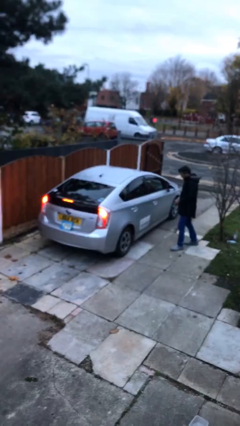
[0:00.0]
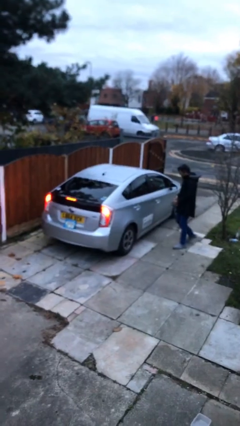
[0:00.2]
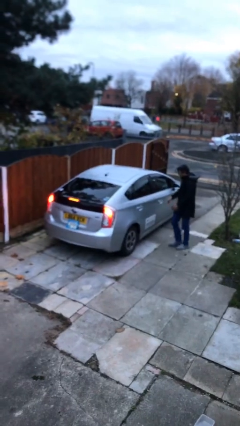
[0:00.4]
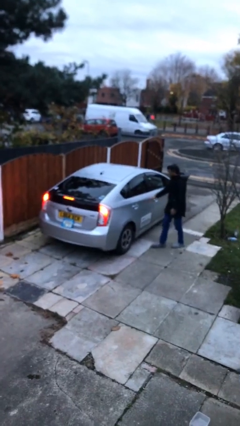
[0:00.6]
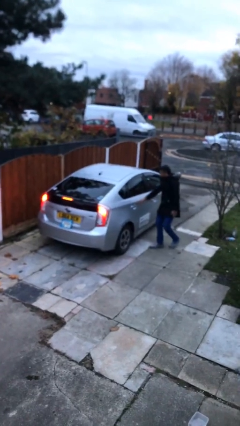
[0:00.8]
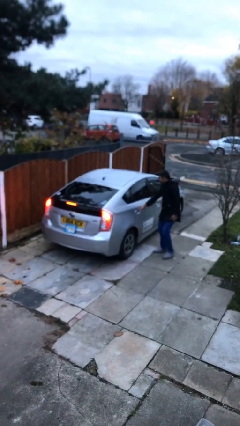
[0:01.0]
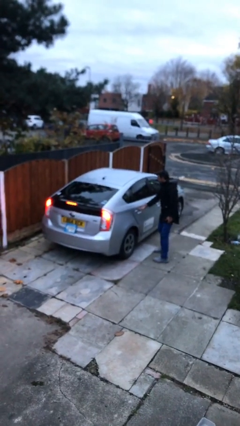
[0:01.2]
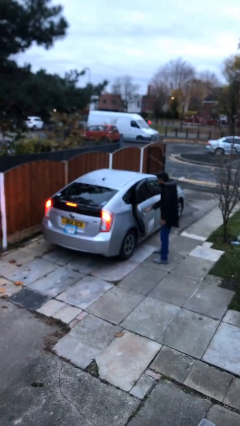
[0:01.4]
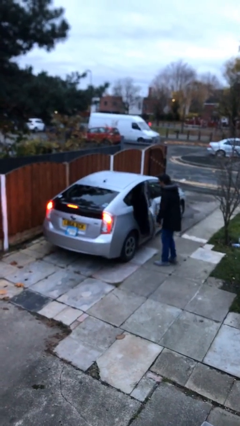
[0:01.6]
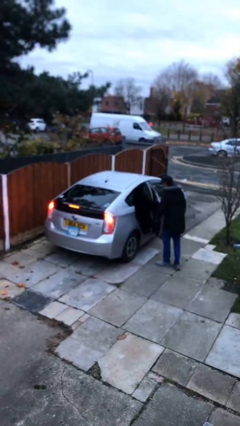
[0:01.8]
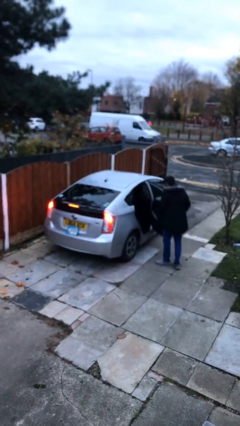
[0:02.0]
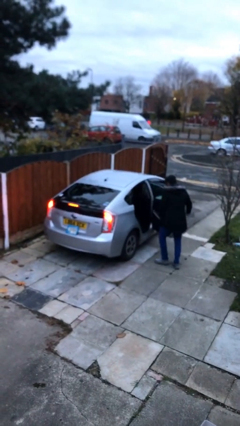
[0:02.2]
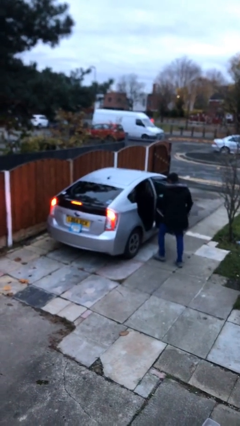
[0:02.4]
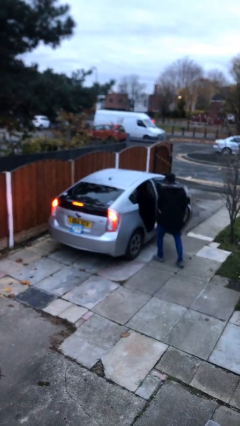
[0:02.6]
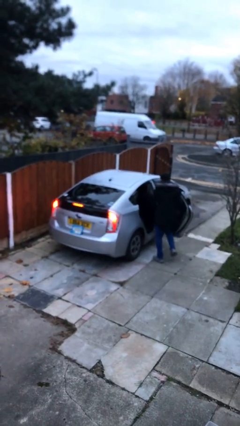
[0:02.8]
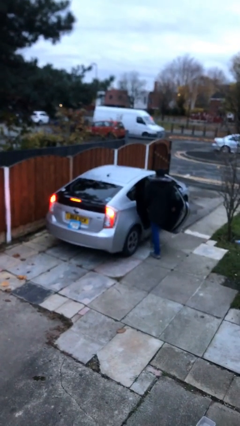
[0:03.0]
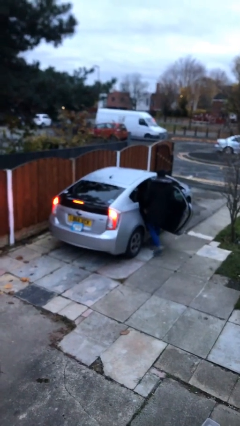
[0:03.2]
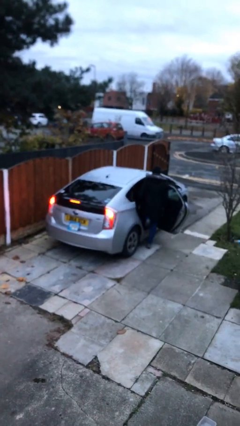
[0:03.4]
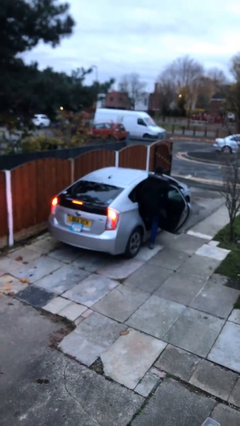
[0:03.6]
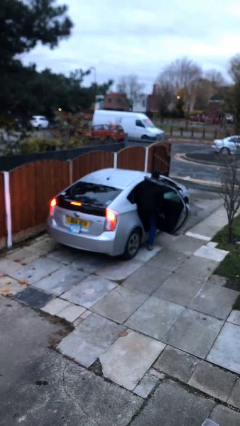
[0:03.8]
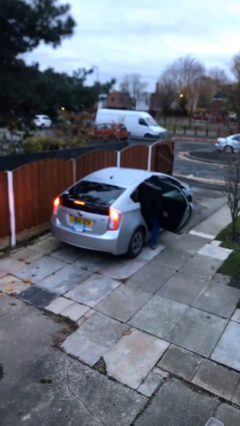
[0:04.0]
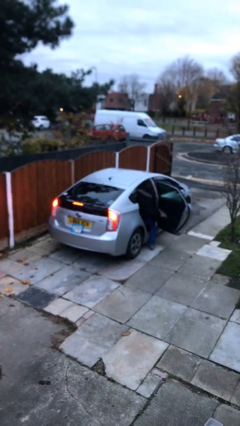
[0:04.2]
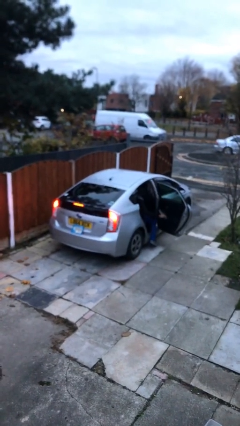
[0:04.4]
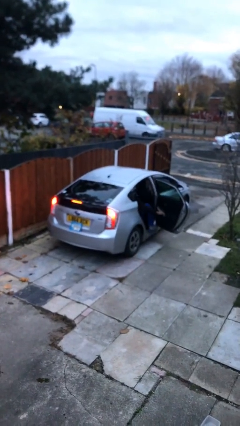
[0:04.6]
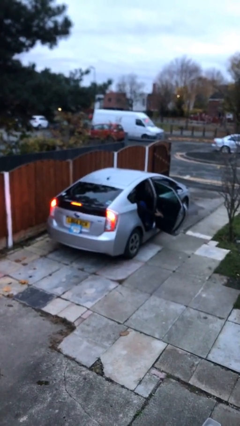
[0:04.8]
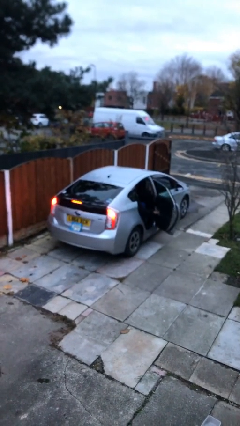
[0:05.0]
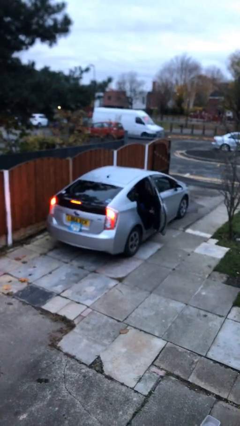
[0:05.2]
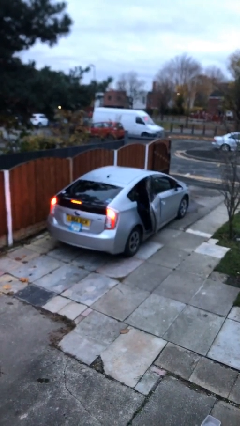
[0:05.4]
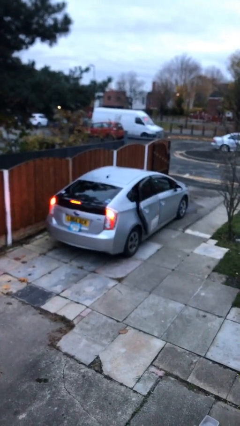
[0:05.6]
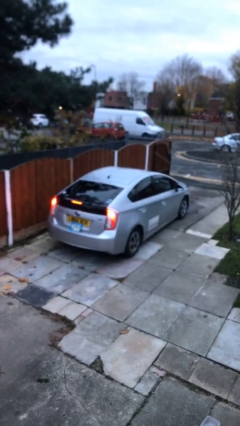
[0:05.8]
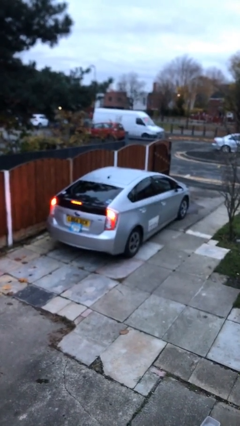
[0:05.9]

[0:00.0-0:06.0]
car picks up person

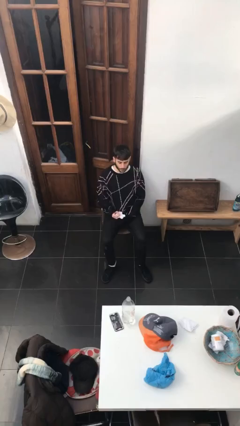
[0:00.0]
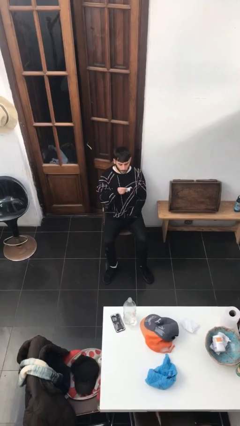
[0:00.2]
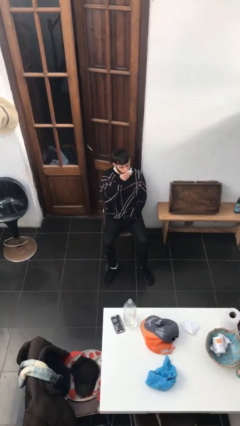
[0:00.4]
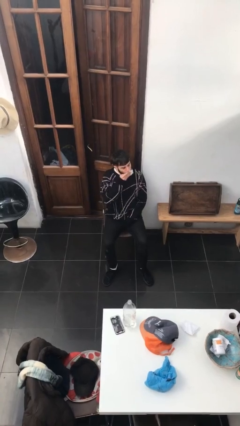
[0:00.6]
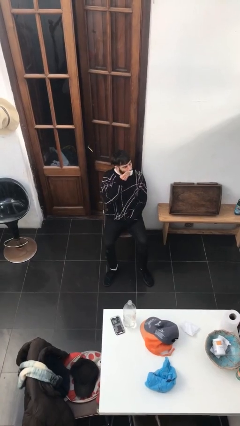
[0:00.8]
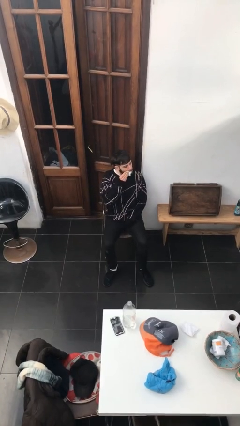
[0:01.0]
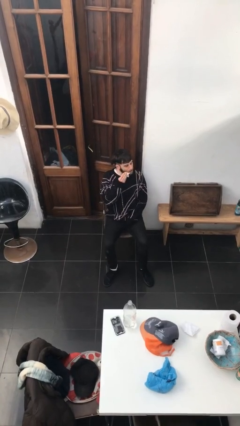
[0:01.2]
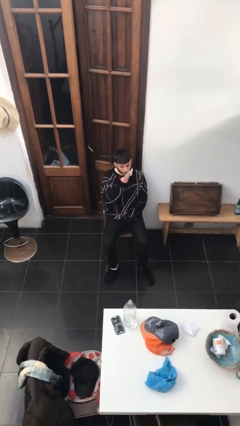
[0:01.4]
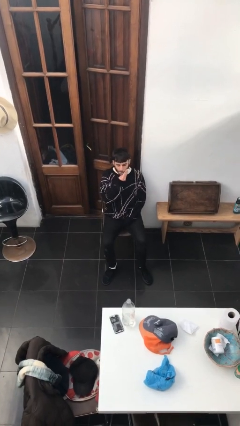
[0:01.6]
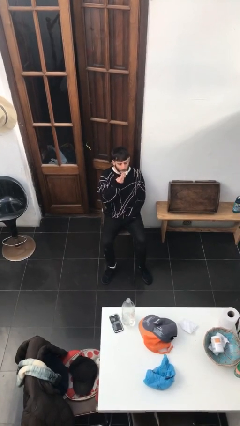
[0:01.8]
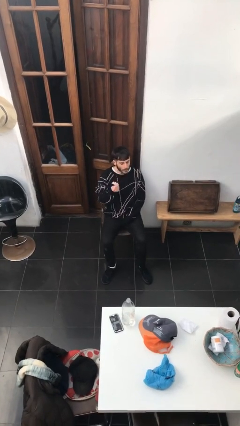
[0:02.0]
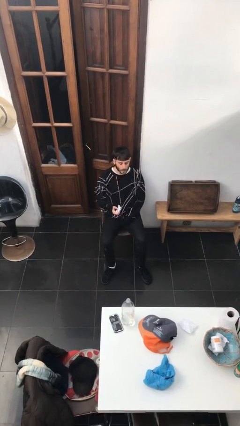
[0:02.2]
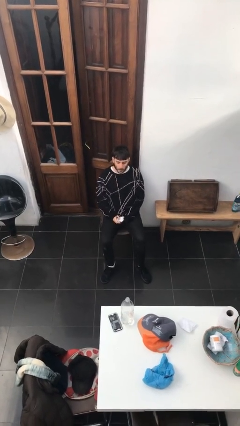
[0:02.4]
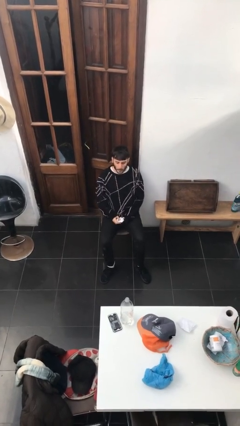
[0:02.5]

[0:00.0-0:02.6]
person wipes mouth with napkin

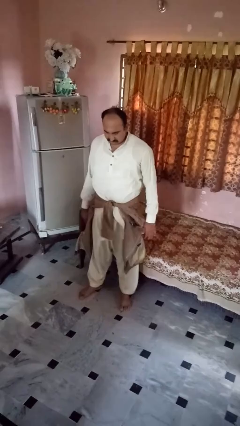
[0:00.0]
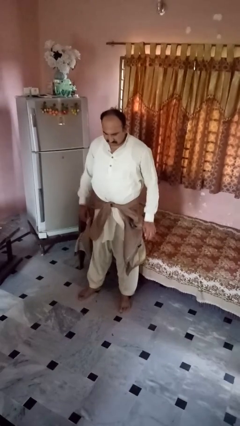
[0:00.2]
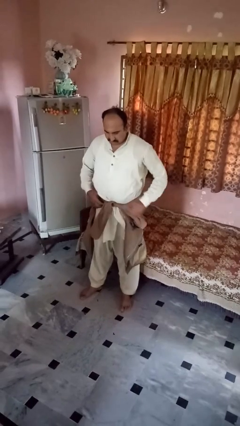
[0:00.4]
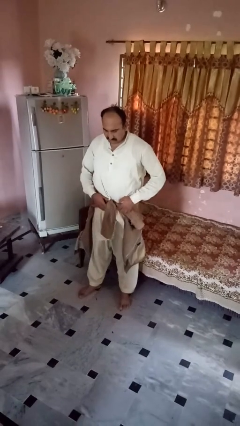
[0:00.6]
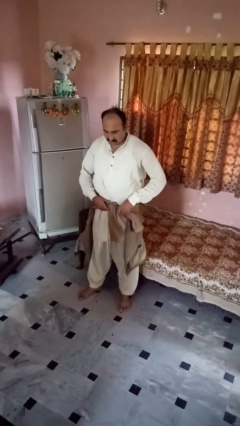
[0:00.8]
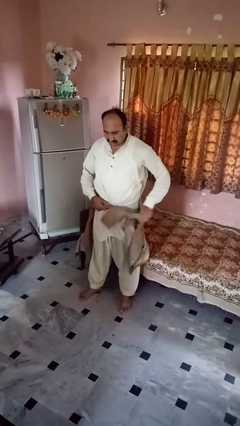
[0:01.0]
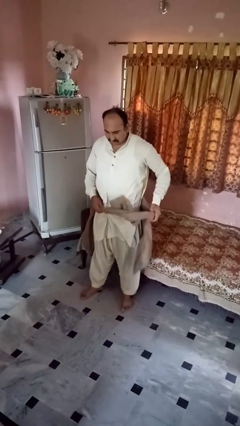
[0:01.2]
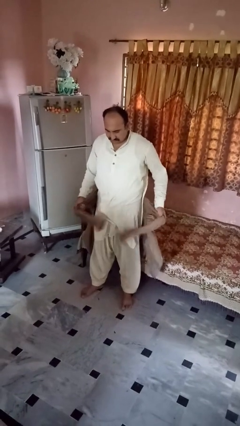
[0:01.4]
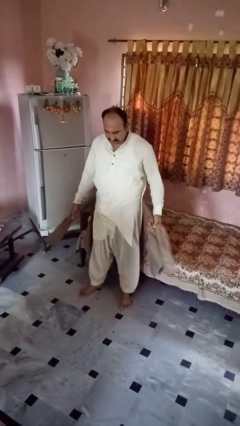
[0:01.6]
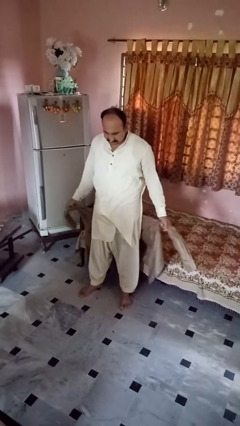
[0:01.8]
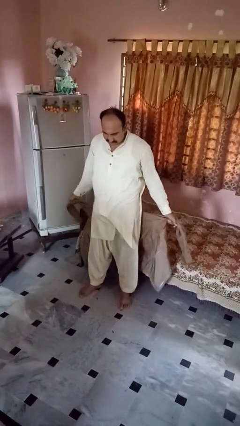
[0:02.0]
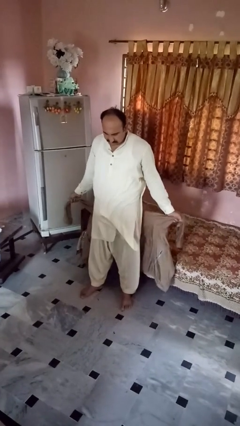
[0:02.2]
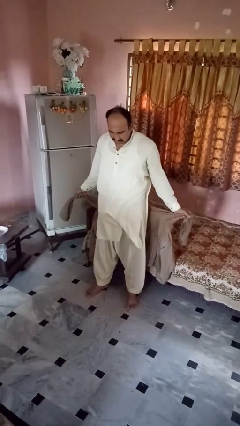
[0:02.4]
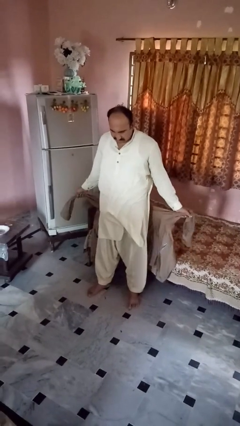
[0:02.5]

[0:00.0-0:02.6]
person unties jacket around waist

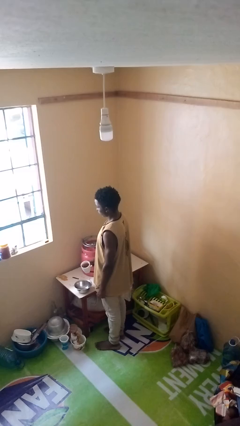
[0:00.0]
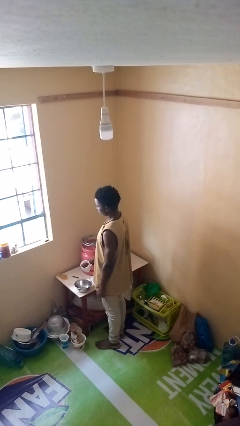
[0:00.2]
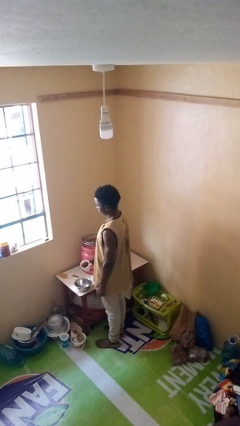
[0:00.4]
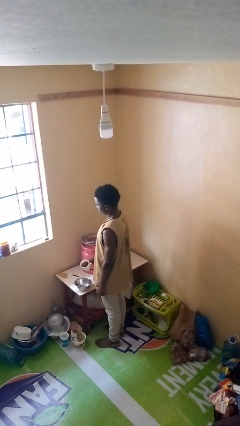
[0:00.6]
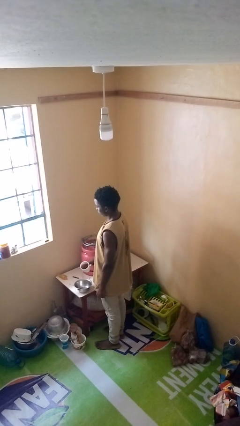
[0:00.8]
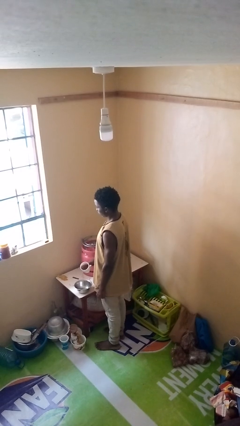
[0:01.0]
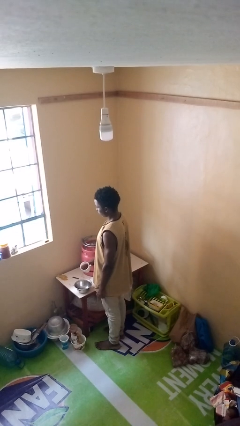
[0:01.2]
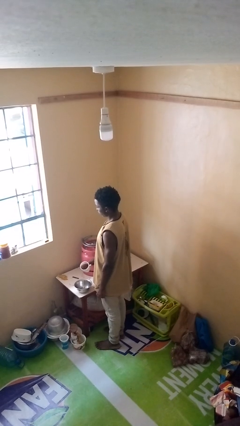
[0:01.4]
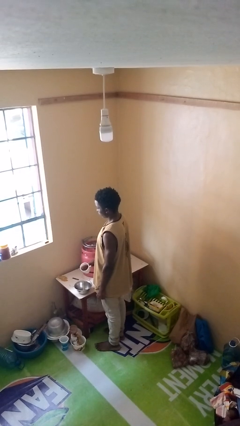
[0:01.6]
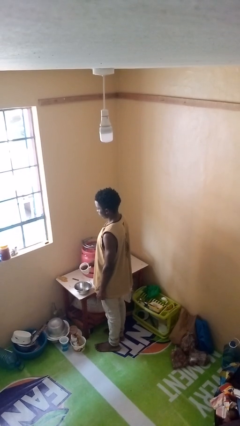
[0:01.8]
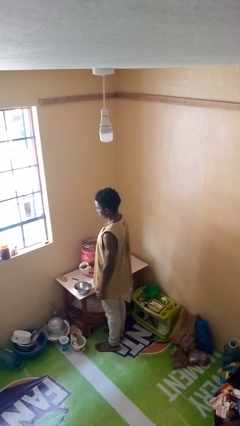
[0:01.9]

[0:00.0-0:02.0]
person pours into bowl

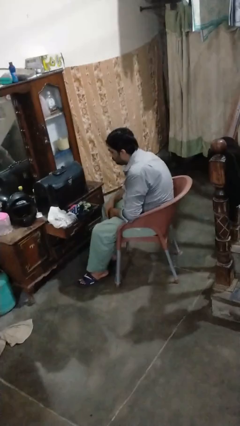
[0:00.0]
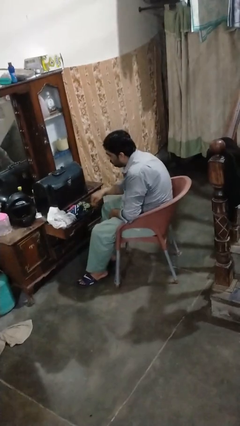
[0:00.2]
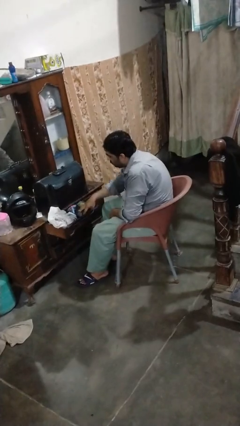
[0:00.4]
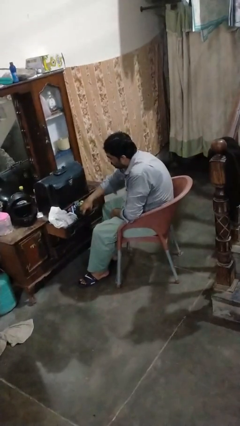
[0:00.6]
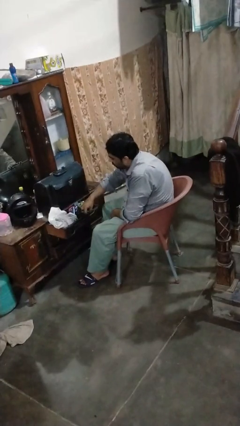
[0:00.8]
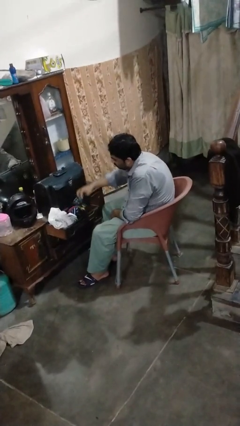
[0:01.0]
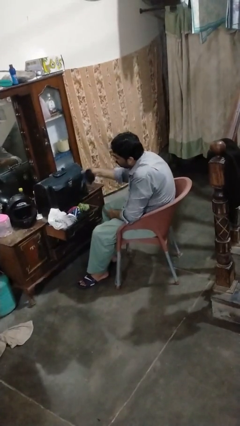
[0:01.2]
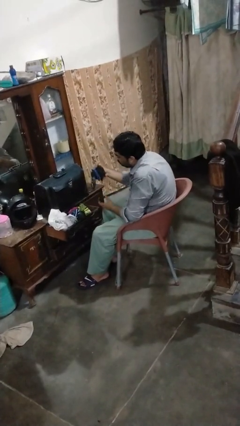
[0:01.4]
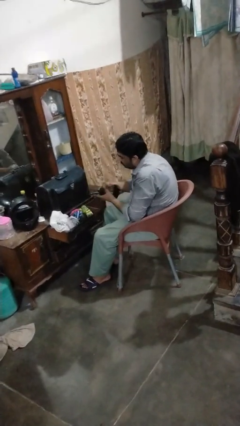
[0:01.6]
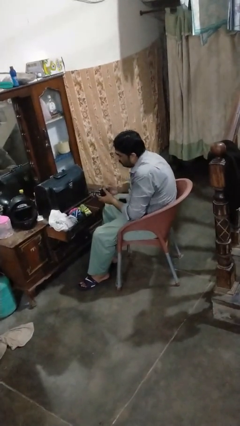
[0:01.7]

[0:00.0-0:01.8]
person takes clothes from dresser

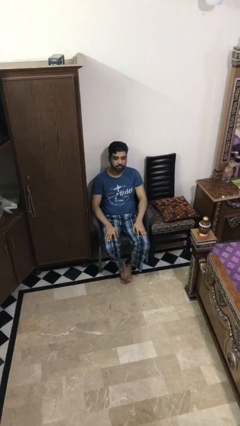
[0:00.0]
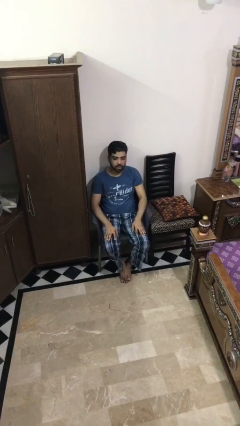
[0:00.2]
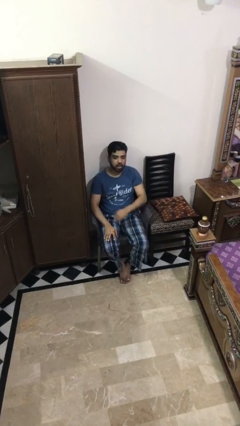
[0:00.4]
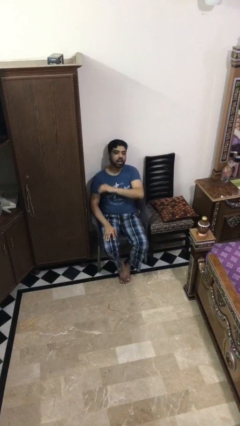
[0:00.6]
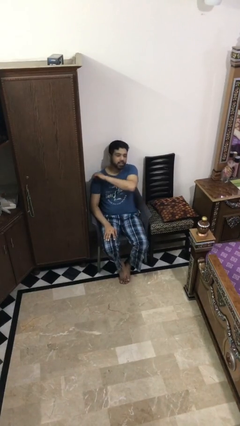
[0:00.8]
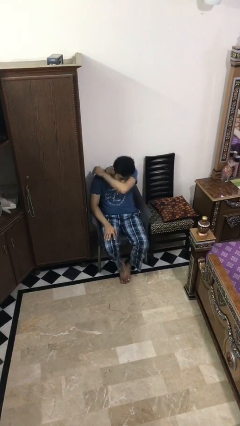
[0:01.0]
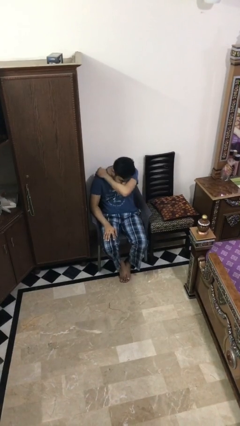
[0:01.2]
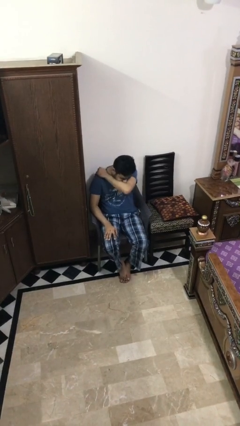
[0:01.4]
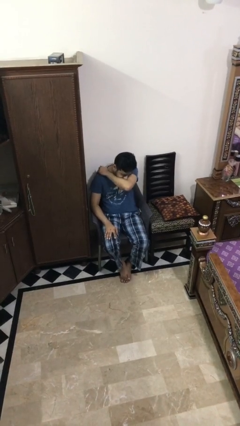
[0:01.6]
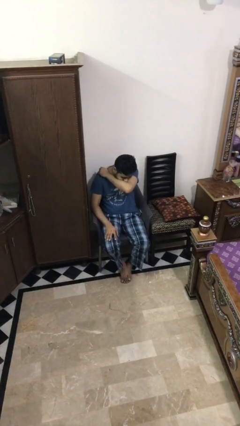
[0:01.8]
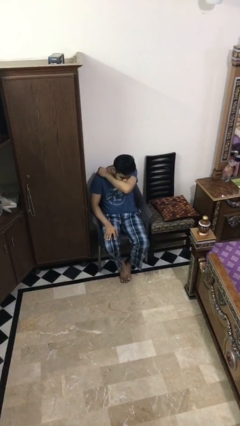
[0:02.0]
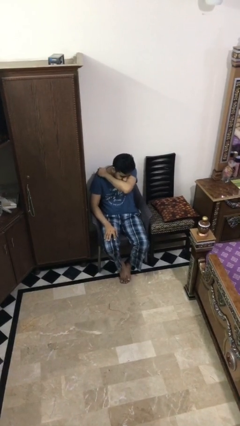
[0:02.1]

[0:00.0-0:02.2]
person sneezes into arm
